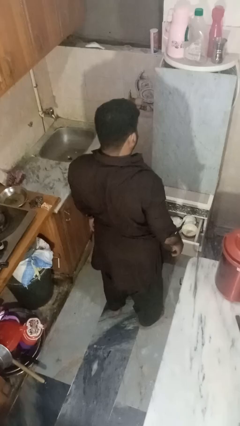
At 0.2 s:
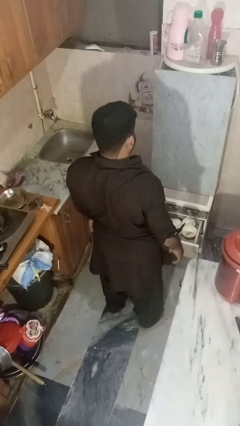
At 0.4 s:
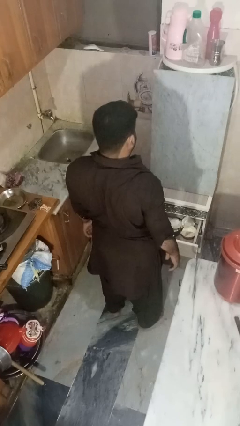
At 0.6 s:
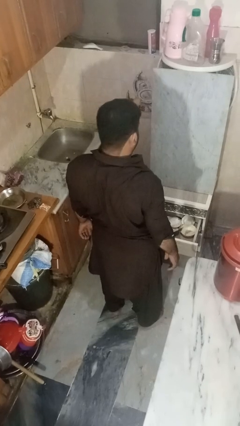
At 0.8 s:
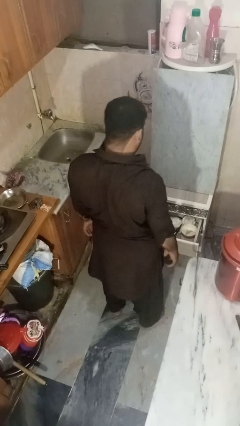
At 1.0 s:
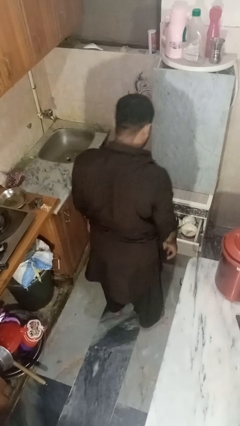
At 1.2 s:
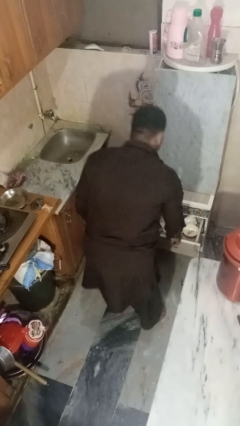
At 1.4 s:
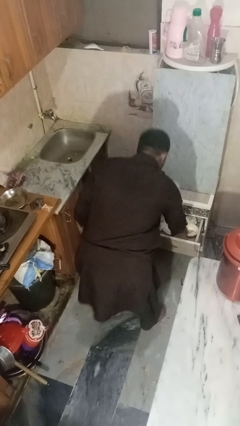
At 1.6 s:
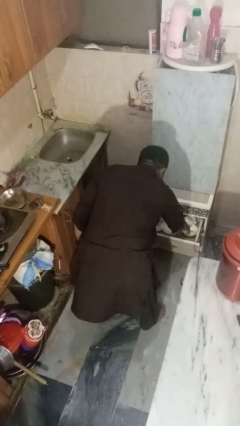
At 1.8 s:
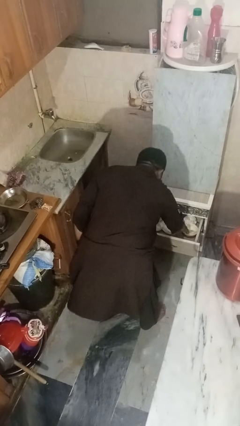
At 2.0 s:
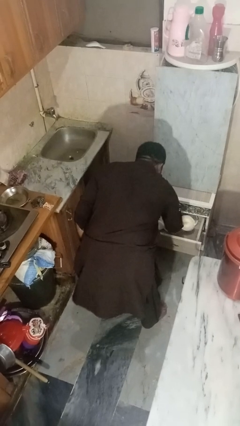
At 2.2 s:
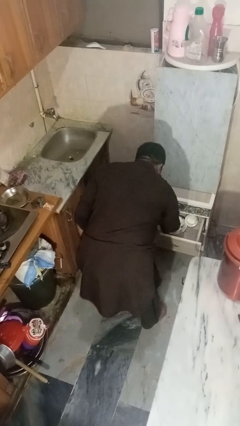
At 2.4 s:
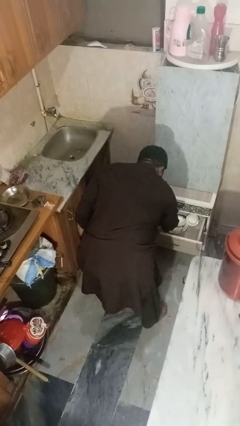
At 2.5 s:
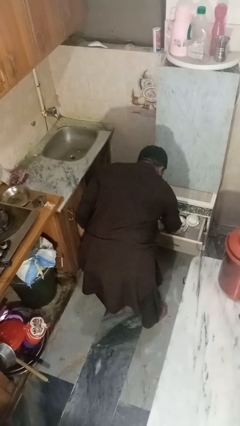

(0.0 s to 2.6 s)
person searches in kitchen drawer

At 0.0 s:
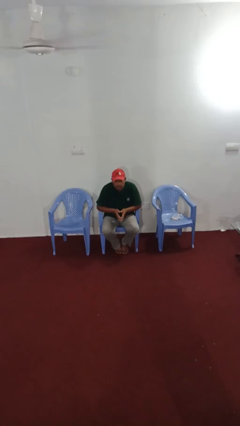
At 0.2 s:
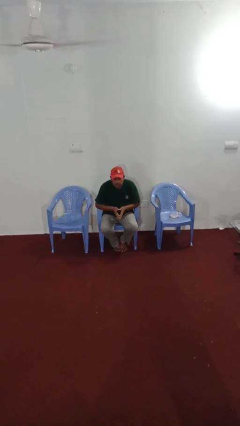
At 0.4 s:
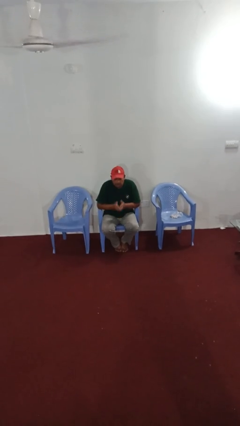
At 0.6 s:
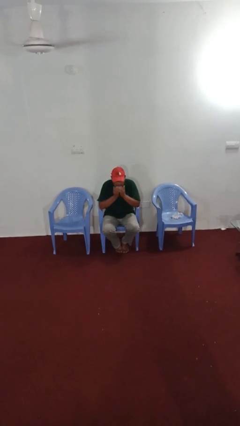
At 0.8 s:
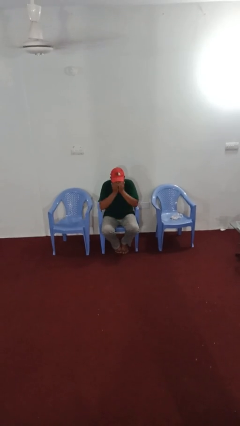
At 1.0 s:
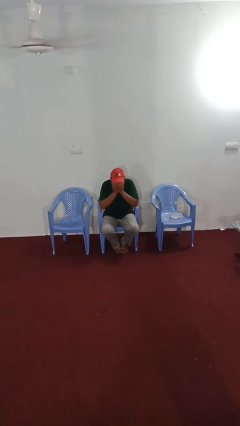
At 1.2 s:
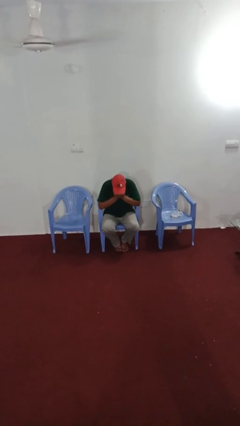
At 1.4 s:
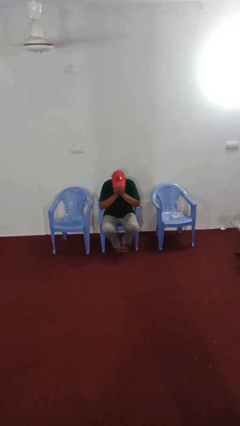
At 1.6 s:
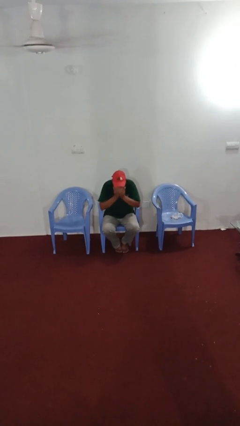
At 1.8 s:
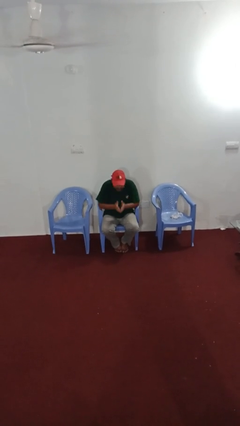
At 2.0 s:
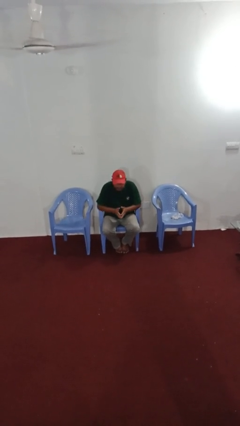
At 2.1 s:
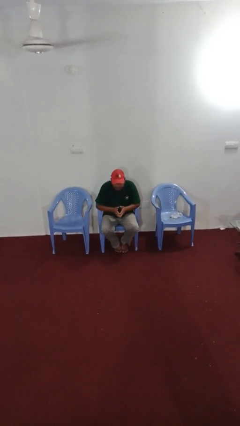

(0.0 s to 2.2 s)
person sneezes into hand

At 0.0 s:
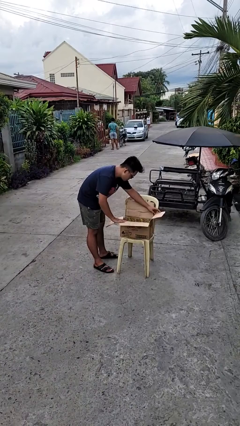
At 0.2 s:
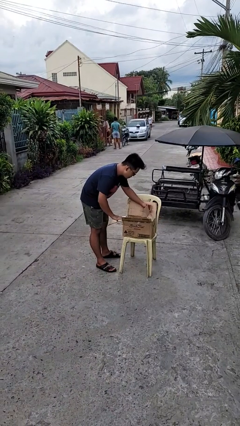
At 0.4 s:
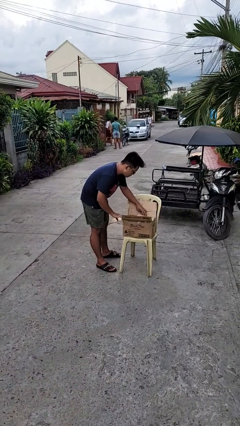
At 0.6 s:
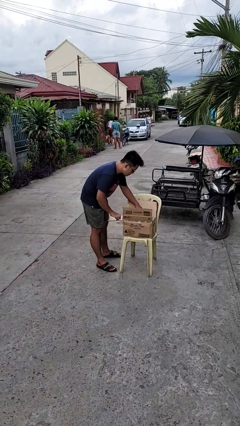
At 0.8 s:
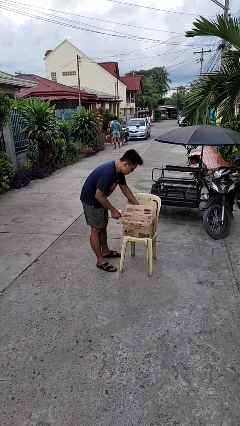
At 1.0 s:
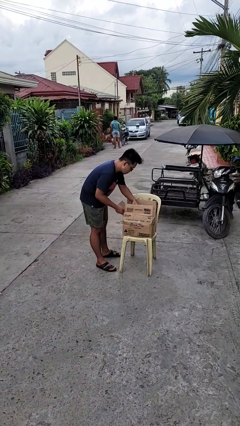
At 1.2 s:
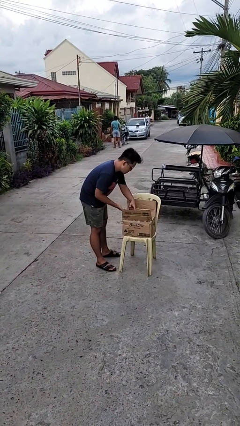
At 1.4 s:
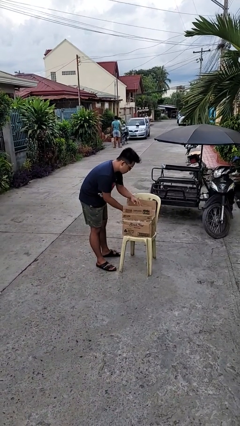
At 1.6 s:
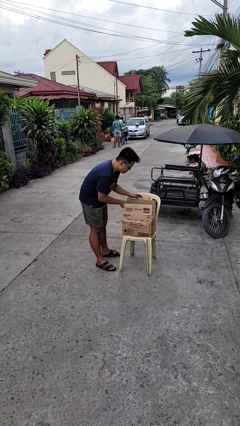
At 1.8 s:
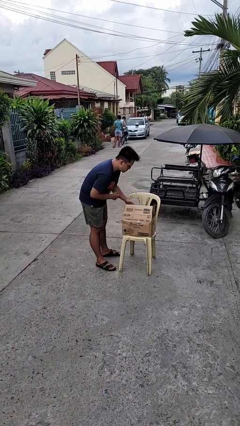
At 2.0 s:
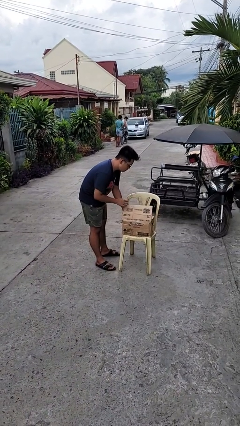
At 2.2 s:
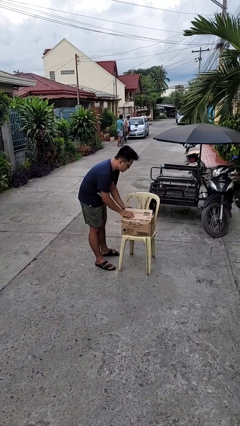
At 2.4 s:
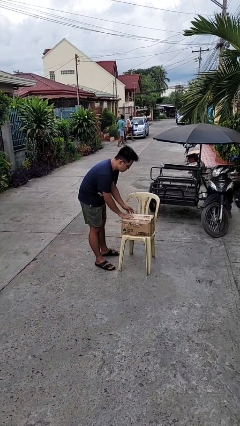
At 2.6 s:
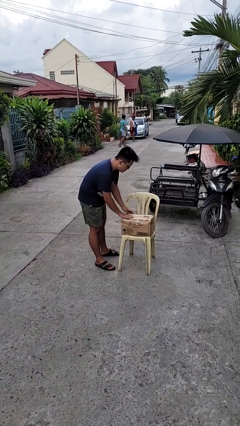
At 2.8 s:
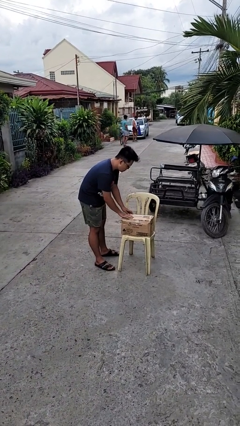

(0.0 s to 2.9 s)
person closes box

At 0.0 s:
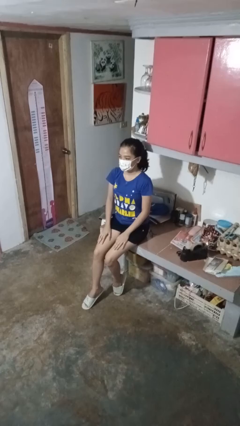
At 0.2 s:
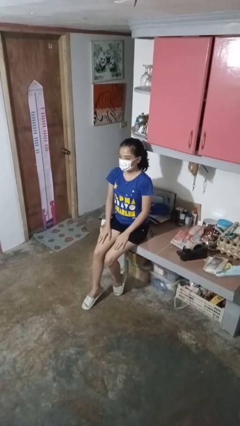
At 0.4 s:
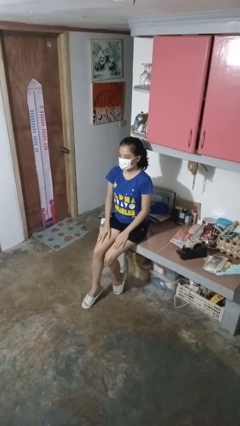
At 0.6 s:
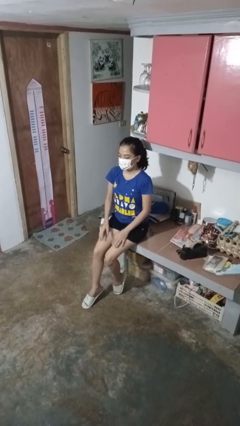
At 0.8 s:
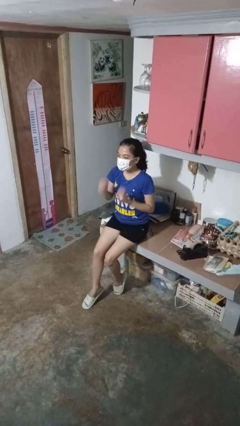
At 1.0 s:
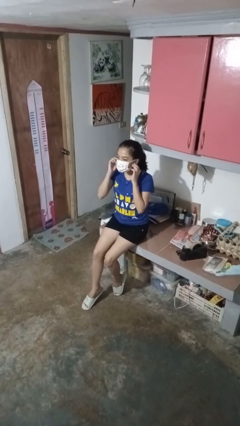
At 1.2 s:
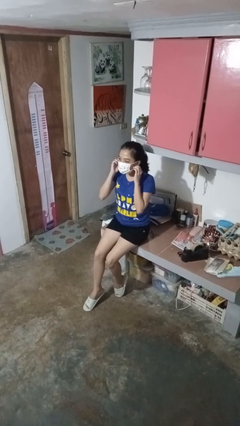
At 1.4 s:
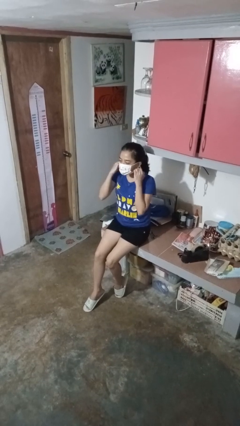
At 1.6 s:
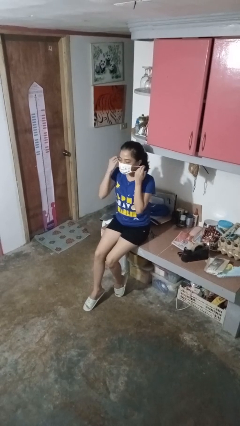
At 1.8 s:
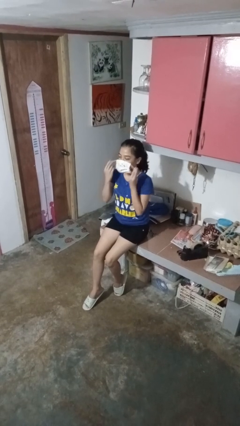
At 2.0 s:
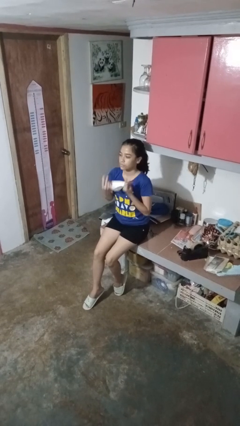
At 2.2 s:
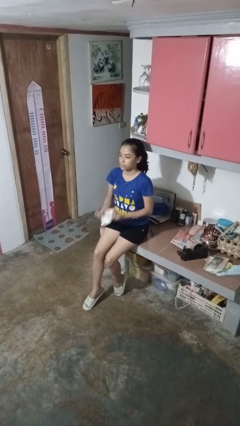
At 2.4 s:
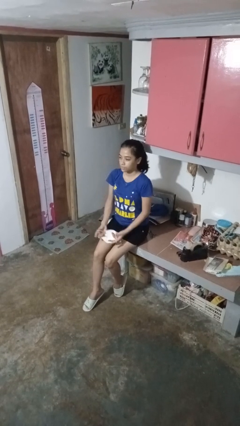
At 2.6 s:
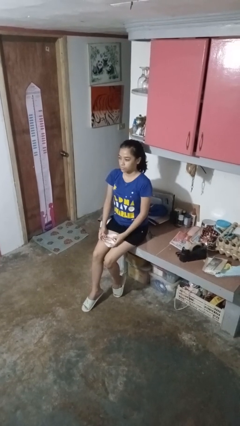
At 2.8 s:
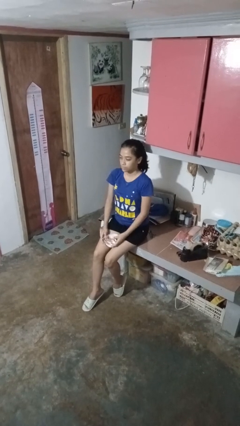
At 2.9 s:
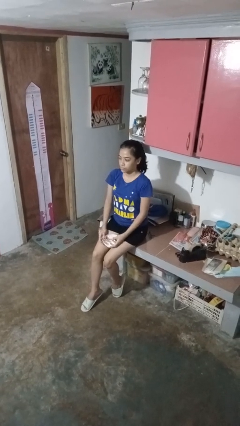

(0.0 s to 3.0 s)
person takes off facemask

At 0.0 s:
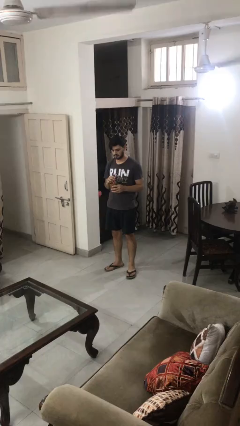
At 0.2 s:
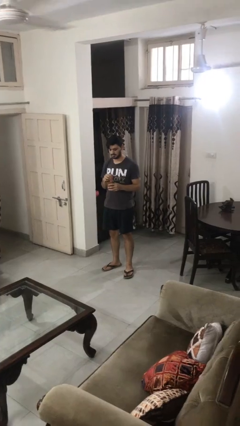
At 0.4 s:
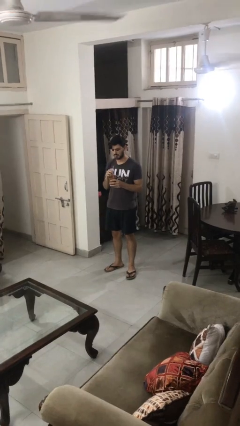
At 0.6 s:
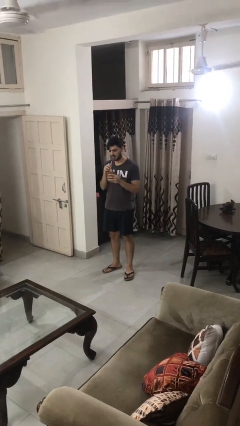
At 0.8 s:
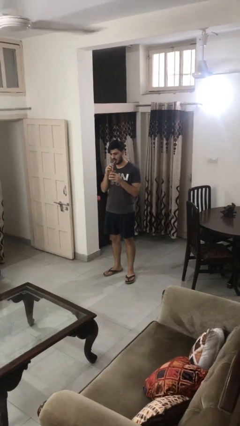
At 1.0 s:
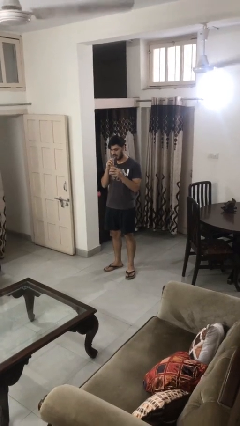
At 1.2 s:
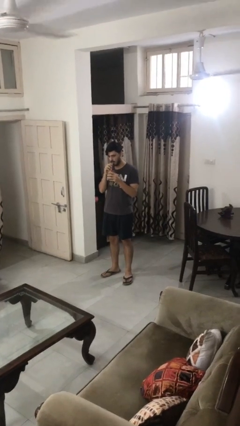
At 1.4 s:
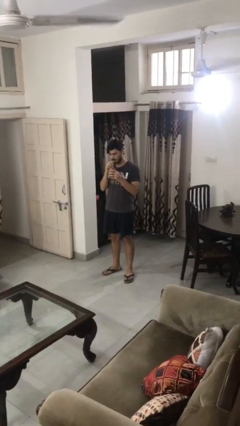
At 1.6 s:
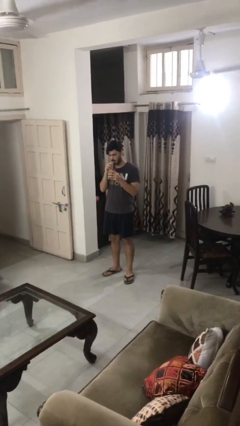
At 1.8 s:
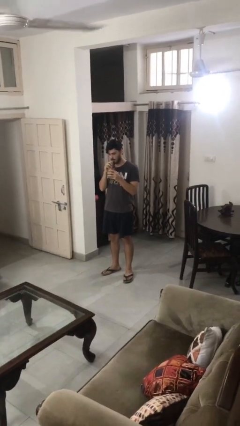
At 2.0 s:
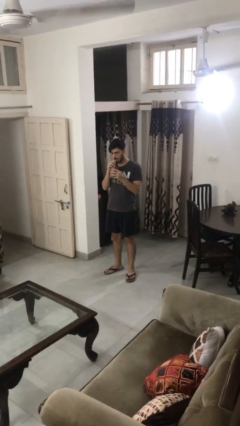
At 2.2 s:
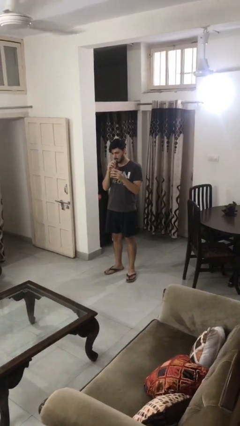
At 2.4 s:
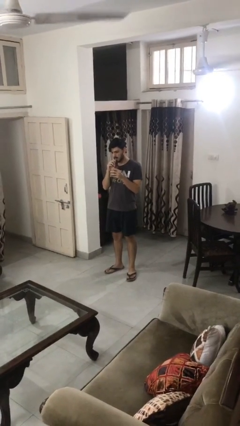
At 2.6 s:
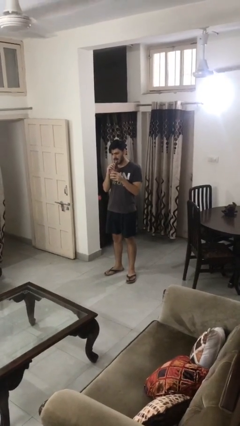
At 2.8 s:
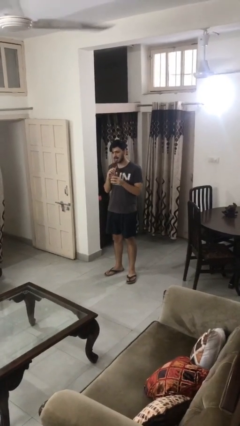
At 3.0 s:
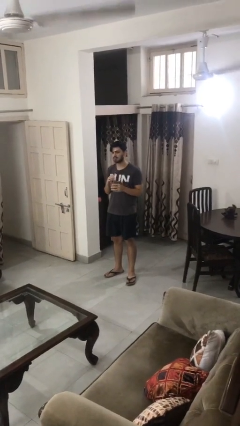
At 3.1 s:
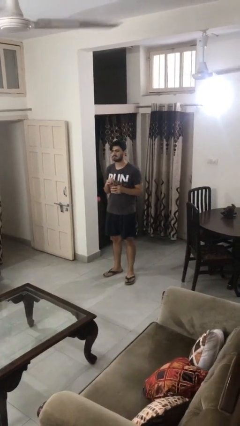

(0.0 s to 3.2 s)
person drinks from straw

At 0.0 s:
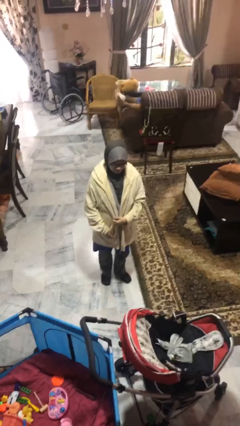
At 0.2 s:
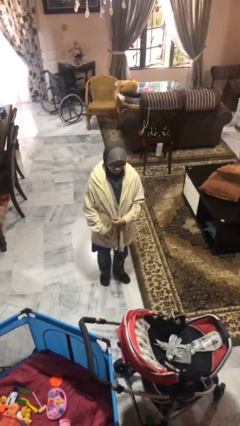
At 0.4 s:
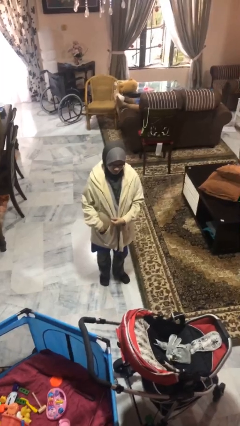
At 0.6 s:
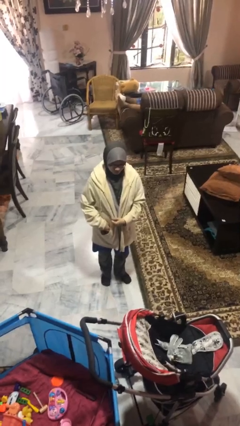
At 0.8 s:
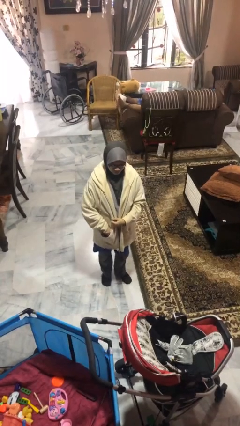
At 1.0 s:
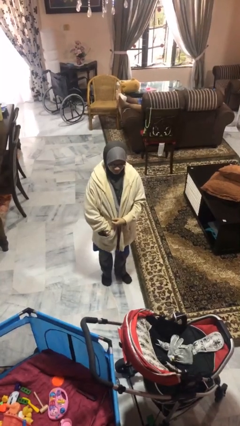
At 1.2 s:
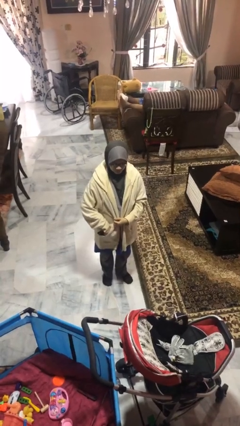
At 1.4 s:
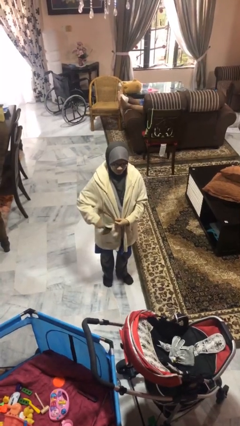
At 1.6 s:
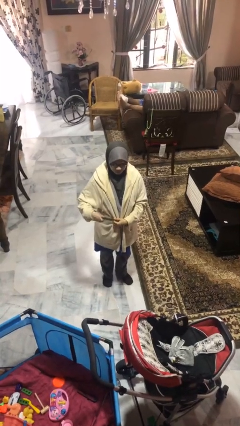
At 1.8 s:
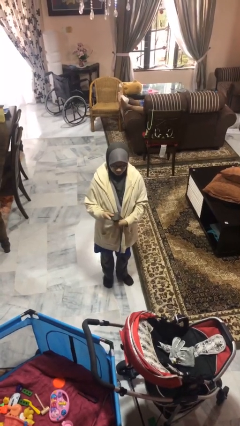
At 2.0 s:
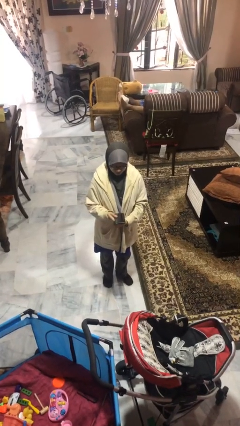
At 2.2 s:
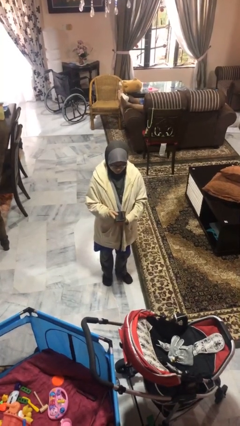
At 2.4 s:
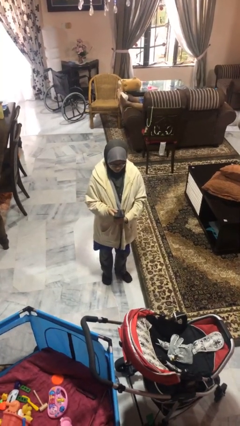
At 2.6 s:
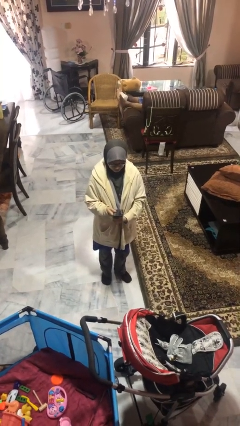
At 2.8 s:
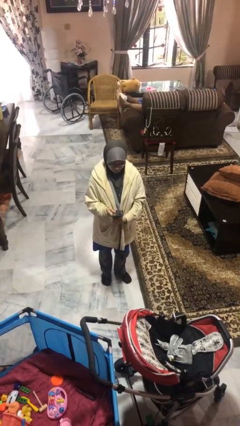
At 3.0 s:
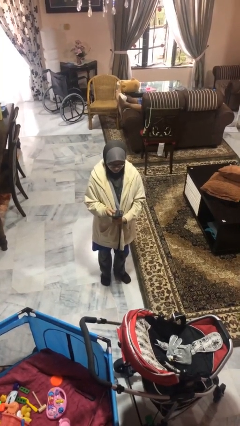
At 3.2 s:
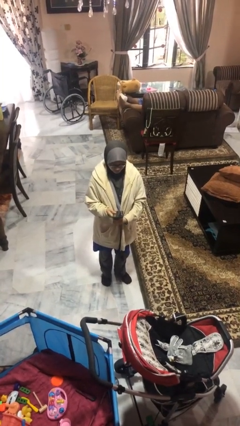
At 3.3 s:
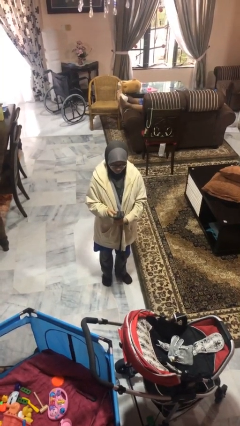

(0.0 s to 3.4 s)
person takes phone from pocket
